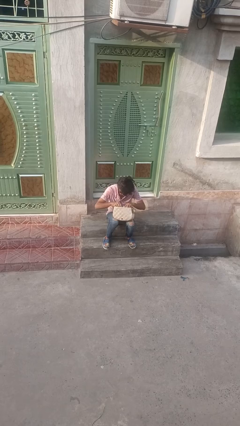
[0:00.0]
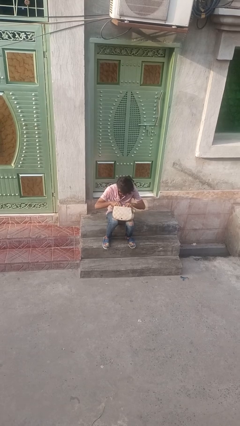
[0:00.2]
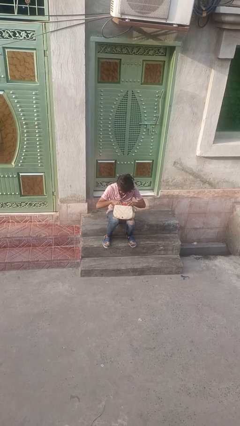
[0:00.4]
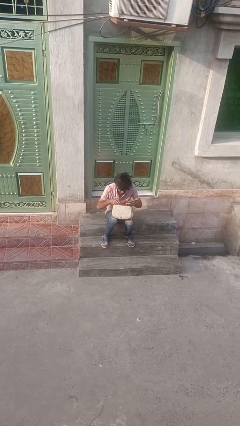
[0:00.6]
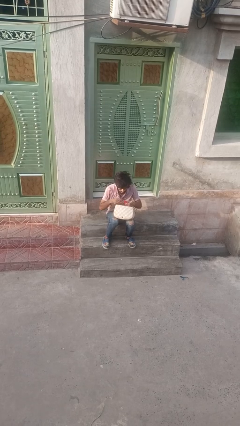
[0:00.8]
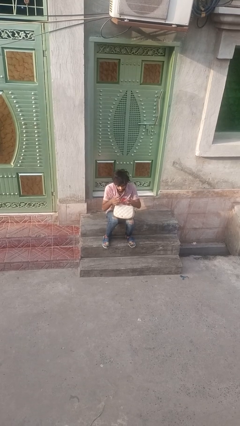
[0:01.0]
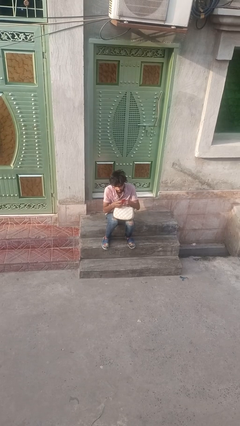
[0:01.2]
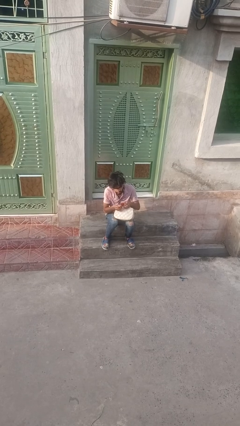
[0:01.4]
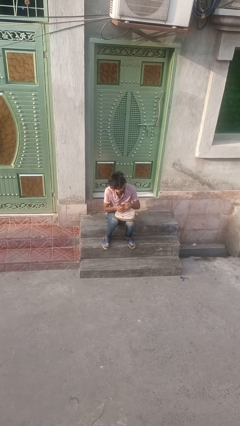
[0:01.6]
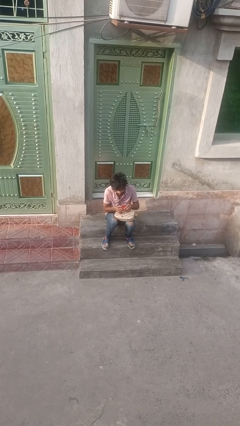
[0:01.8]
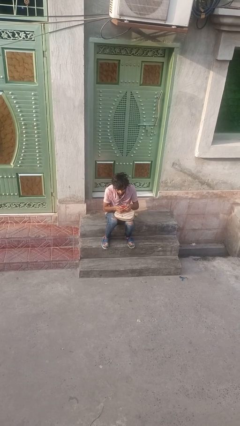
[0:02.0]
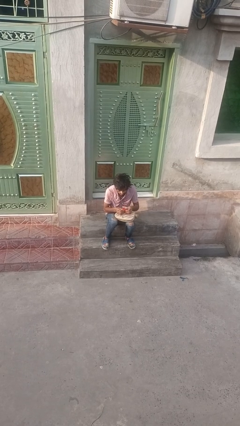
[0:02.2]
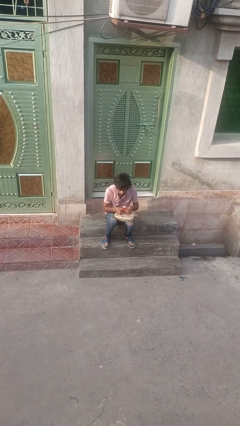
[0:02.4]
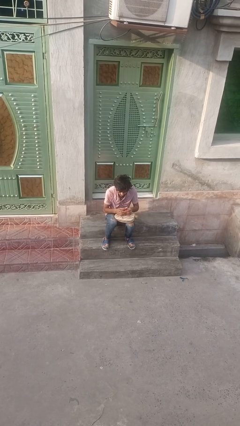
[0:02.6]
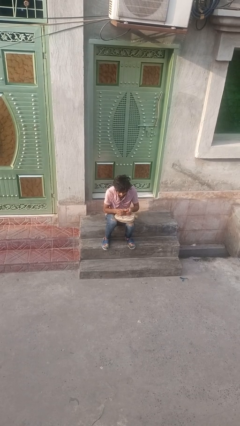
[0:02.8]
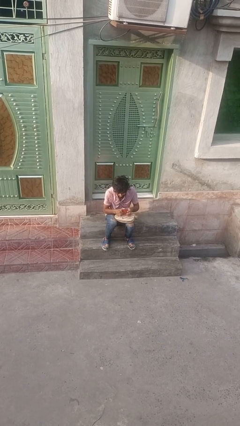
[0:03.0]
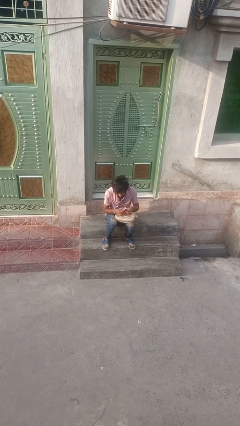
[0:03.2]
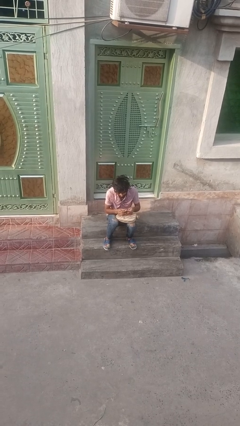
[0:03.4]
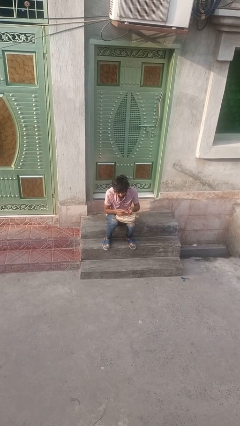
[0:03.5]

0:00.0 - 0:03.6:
person takes object from backpack

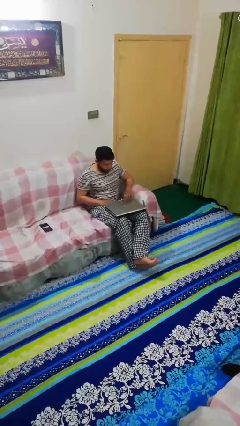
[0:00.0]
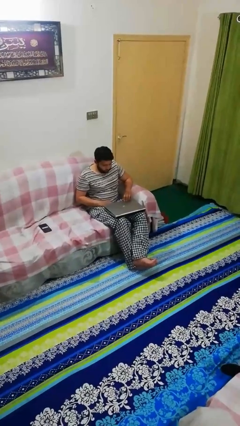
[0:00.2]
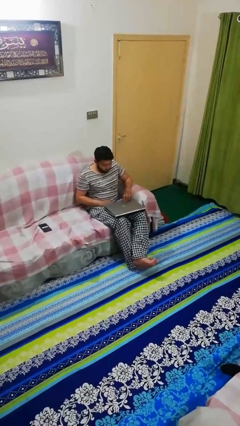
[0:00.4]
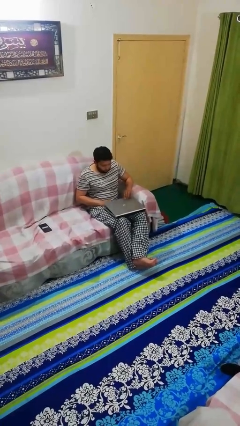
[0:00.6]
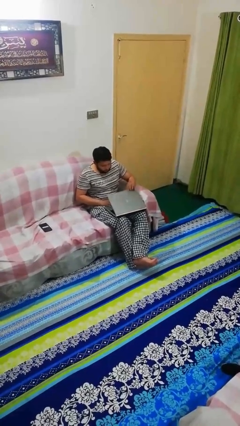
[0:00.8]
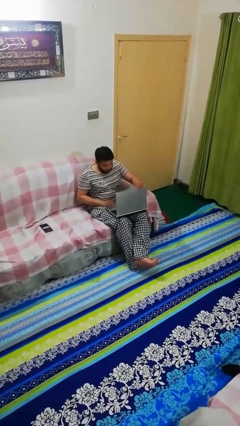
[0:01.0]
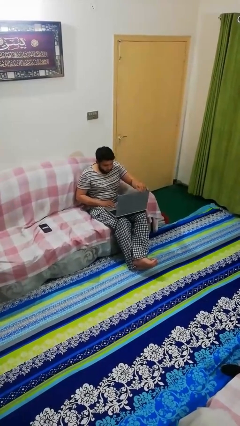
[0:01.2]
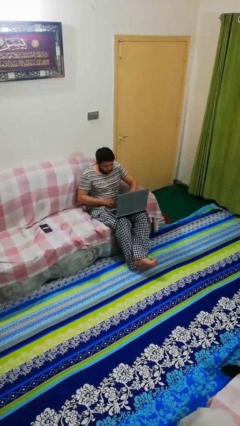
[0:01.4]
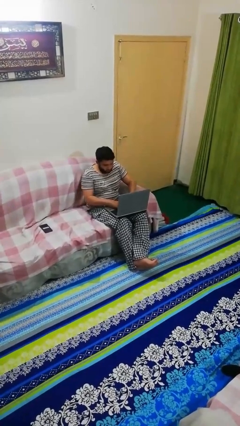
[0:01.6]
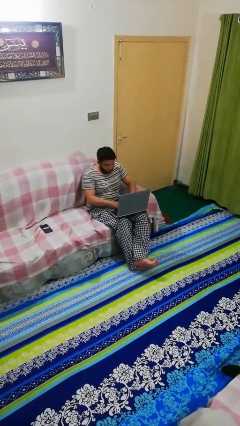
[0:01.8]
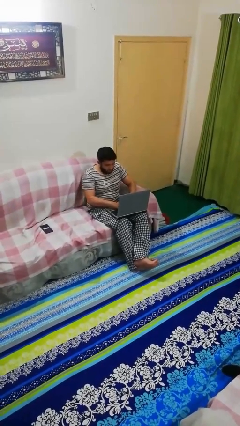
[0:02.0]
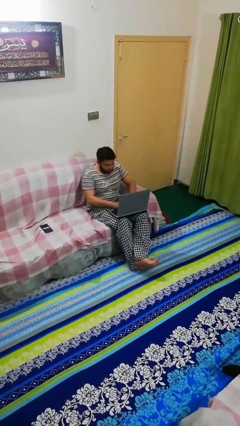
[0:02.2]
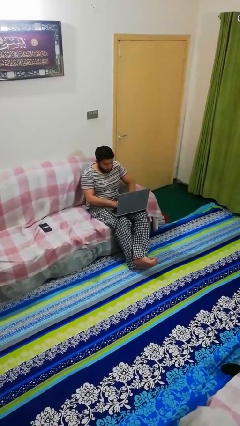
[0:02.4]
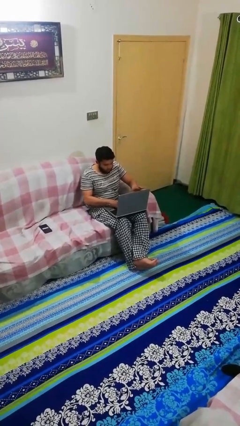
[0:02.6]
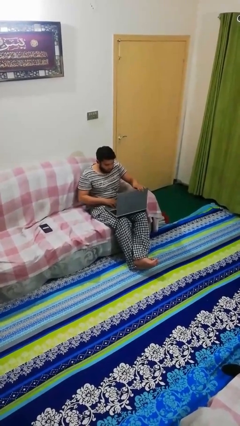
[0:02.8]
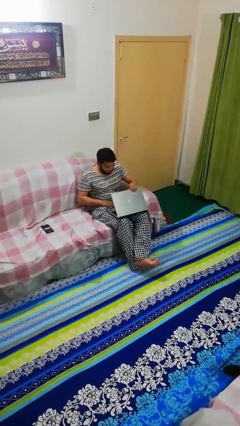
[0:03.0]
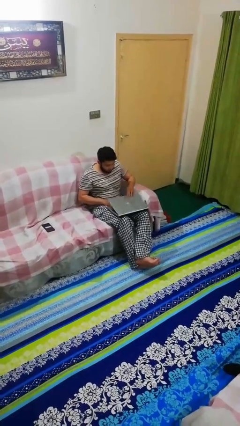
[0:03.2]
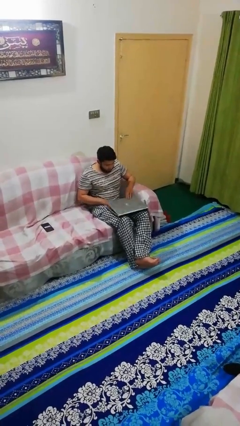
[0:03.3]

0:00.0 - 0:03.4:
person interacts with laptop

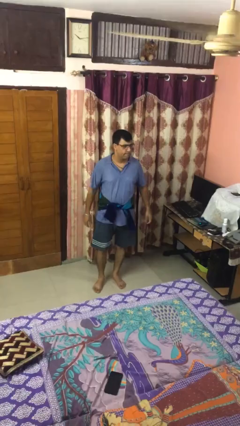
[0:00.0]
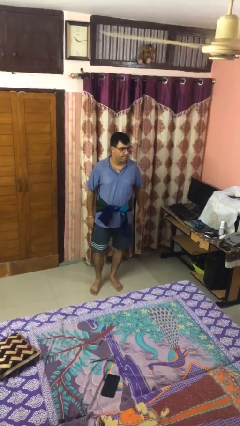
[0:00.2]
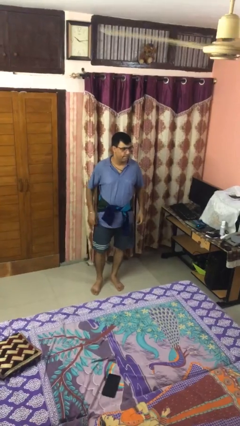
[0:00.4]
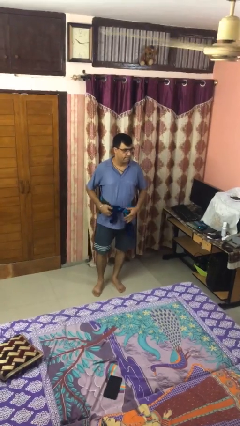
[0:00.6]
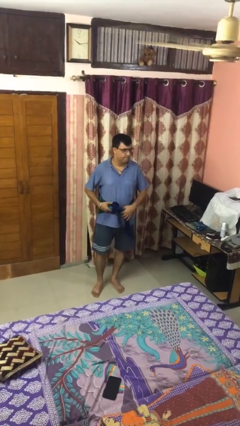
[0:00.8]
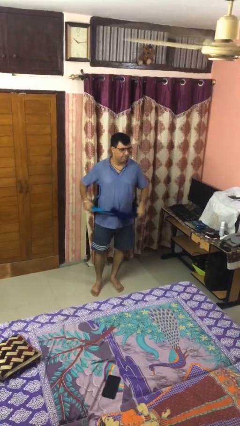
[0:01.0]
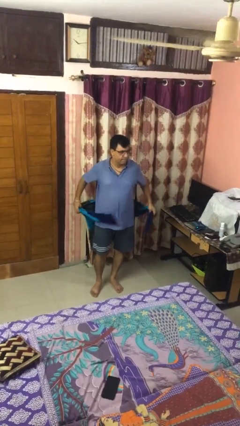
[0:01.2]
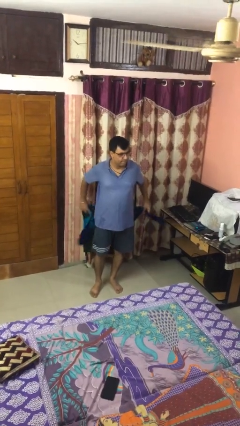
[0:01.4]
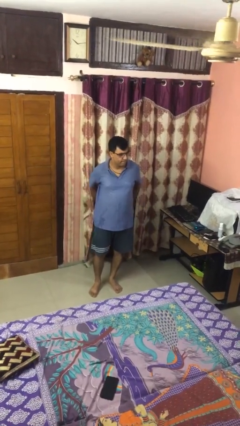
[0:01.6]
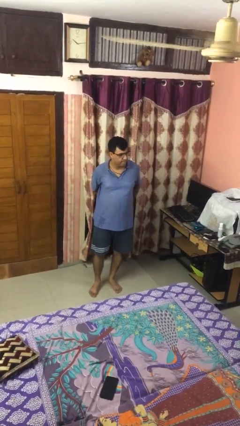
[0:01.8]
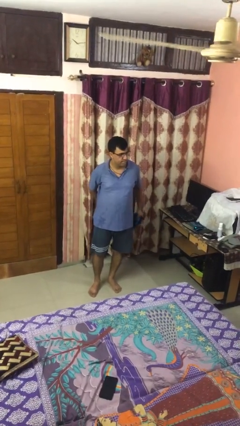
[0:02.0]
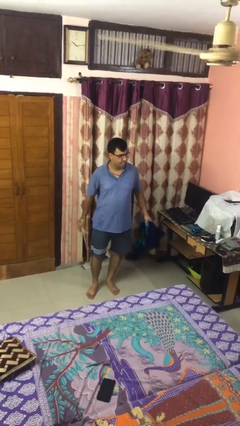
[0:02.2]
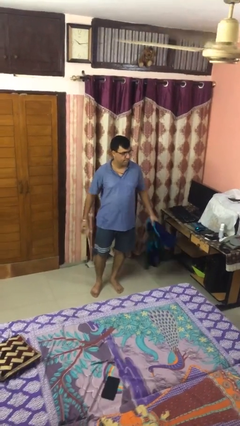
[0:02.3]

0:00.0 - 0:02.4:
person unties jacket around waist

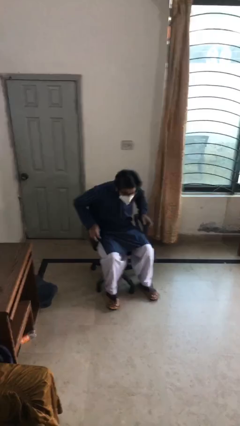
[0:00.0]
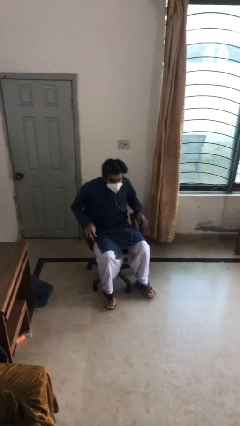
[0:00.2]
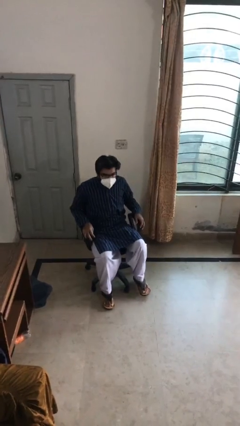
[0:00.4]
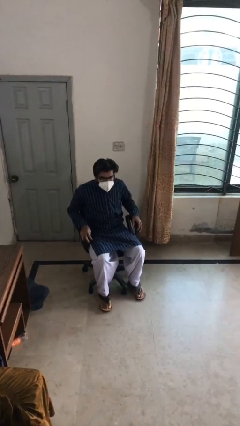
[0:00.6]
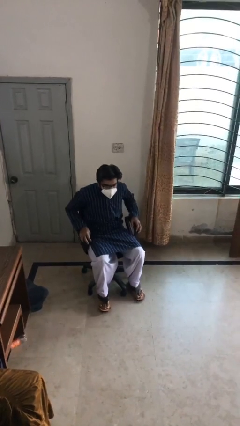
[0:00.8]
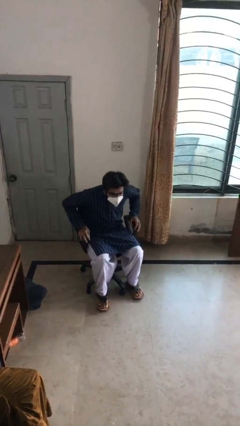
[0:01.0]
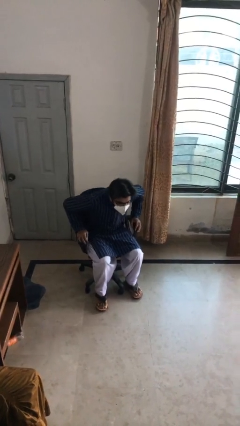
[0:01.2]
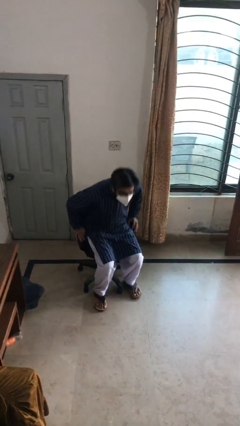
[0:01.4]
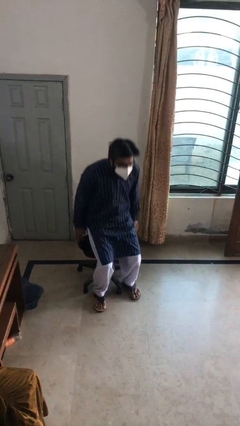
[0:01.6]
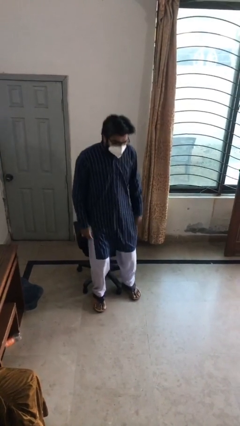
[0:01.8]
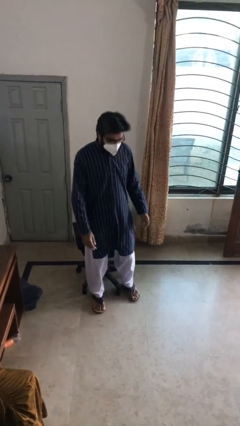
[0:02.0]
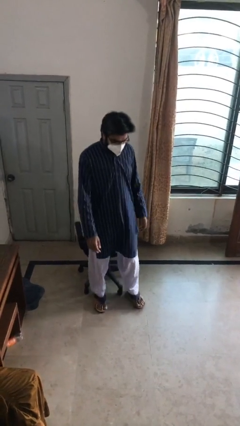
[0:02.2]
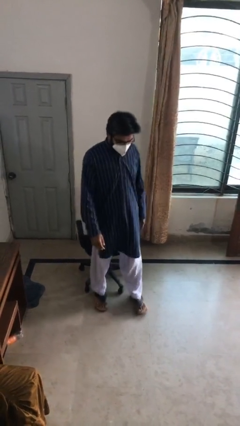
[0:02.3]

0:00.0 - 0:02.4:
person stands up

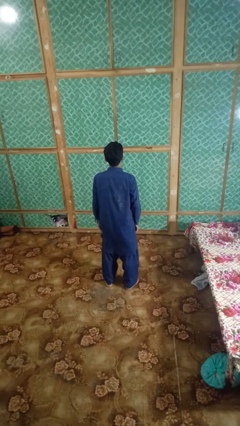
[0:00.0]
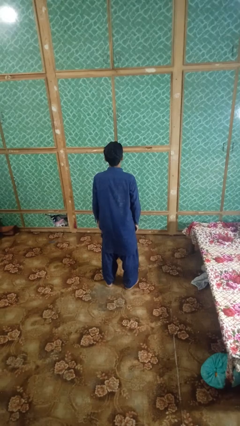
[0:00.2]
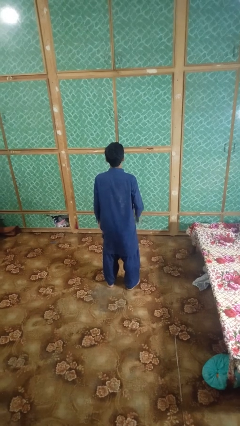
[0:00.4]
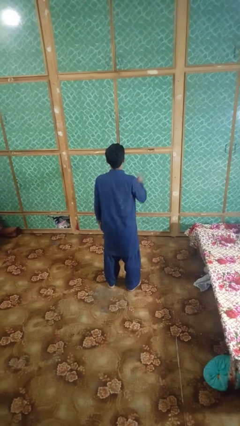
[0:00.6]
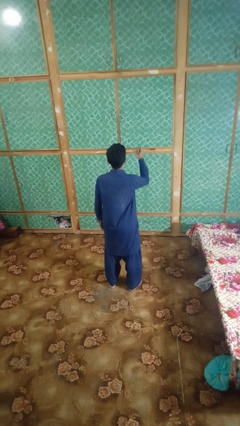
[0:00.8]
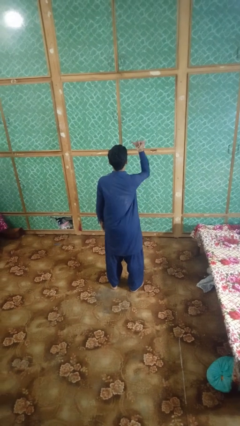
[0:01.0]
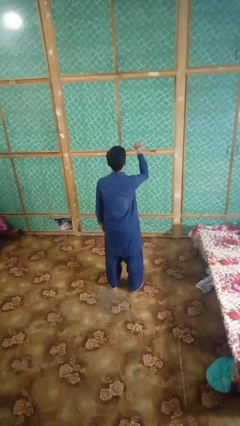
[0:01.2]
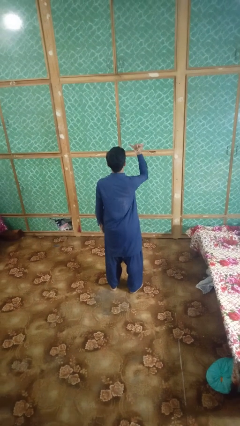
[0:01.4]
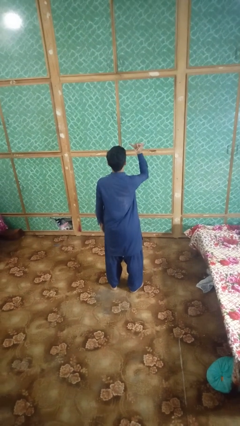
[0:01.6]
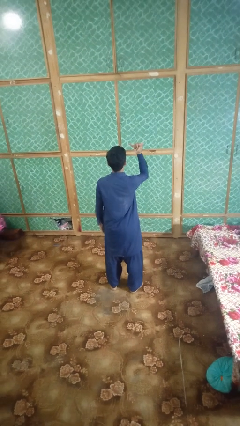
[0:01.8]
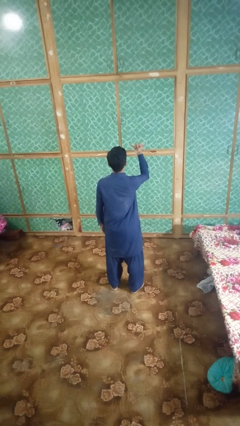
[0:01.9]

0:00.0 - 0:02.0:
person gestures hang loose

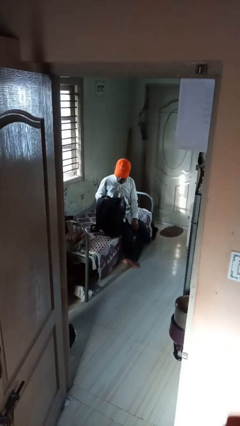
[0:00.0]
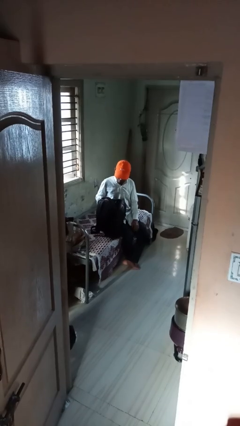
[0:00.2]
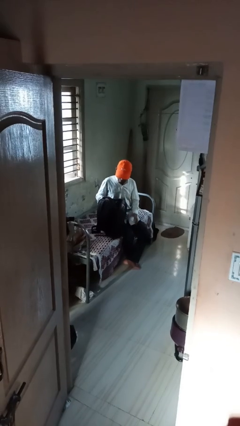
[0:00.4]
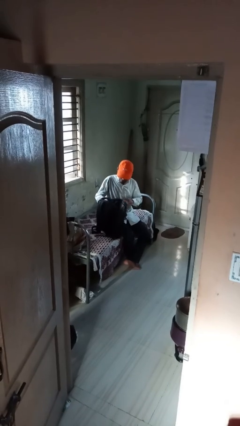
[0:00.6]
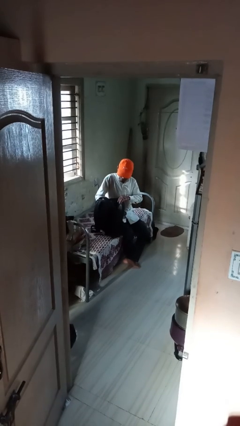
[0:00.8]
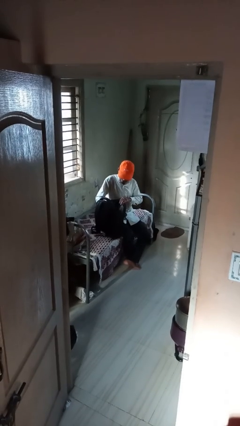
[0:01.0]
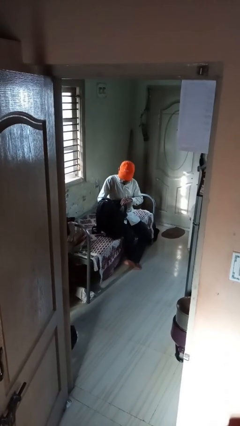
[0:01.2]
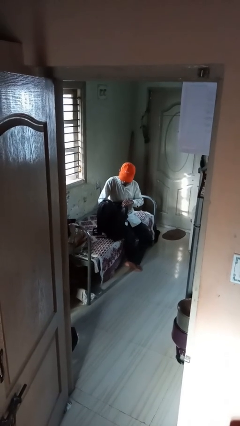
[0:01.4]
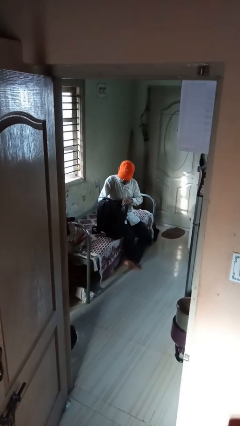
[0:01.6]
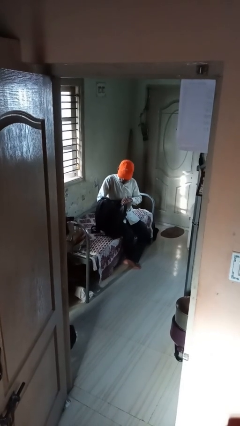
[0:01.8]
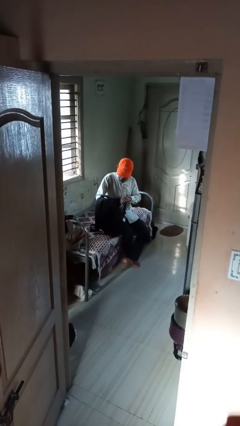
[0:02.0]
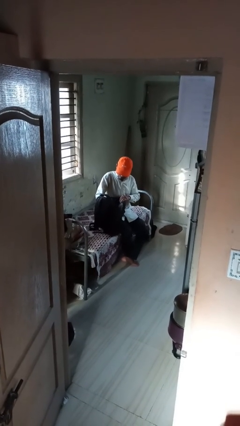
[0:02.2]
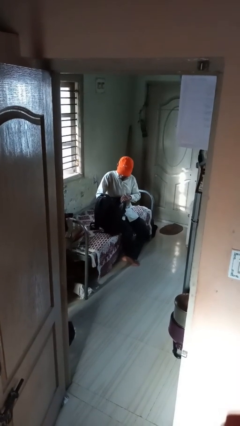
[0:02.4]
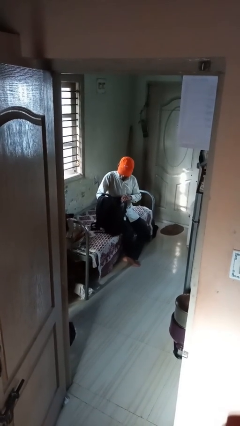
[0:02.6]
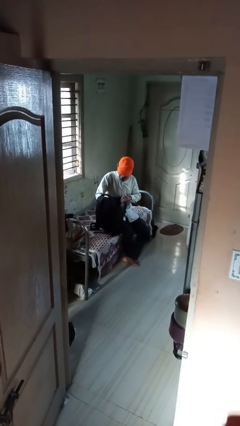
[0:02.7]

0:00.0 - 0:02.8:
person searches in backpack

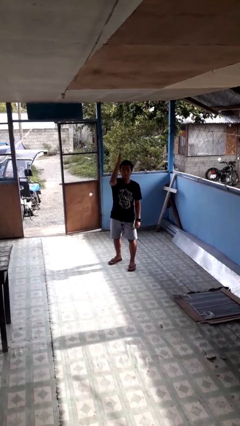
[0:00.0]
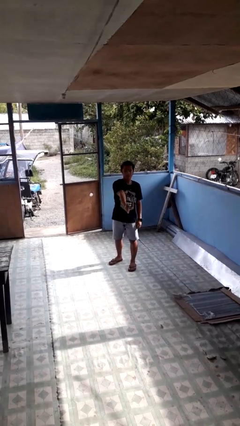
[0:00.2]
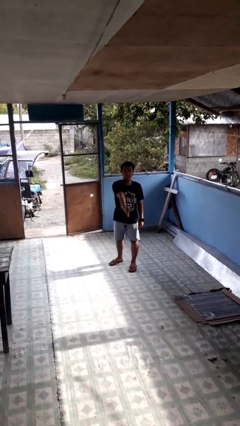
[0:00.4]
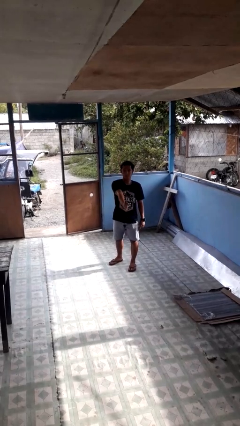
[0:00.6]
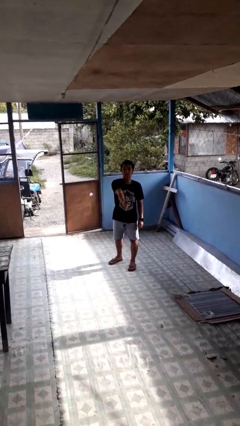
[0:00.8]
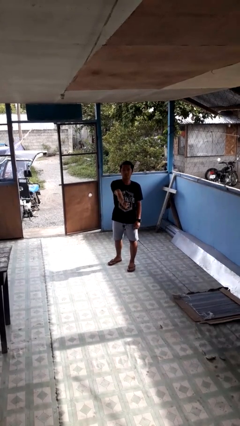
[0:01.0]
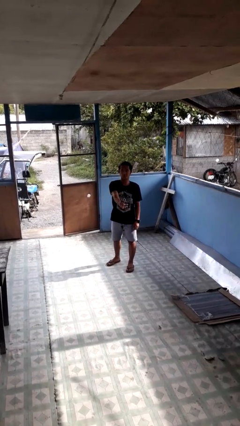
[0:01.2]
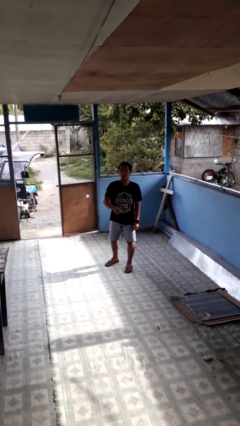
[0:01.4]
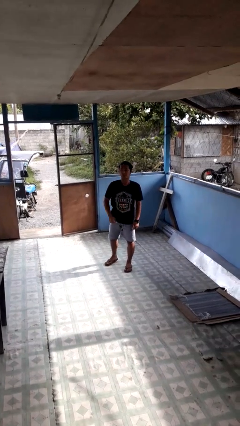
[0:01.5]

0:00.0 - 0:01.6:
person karate chop
